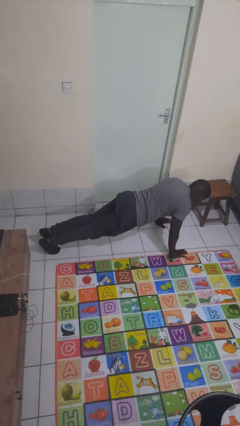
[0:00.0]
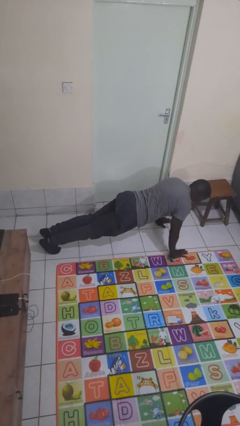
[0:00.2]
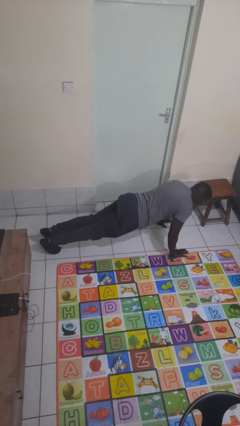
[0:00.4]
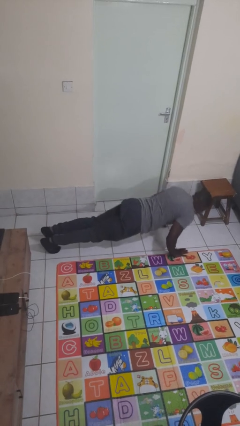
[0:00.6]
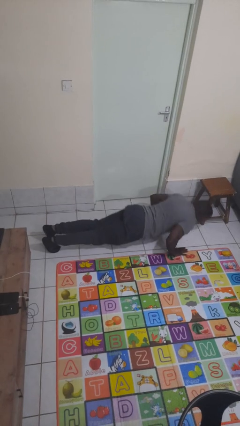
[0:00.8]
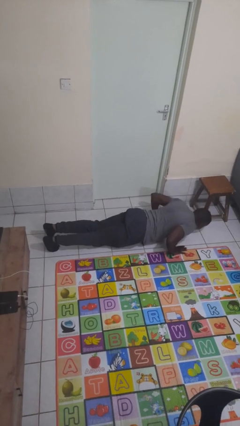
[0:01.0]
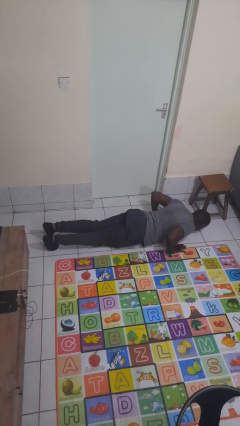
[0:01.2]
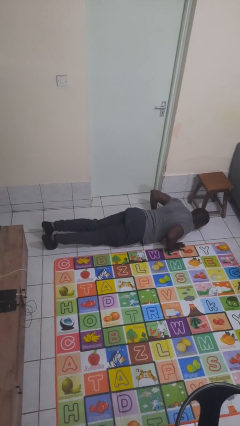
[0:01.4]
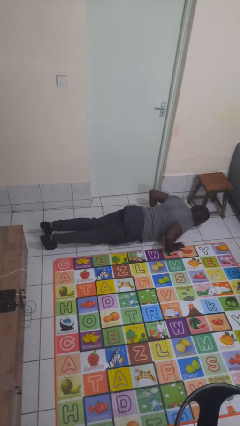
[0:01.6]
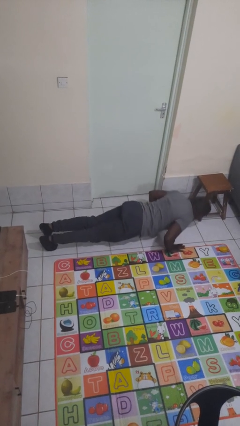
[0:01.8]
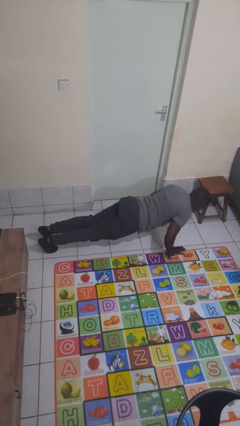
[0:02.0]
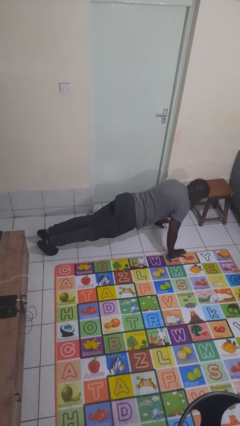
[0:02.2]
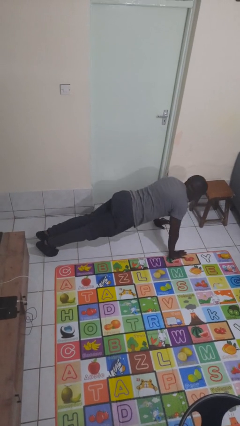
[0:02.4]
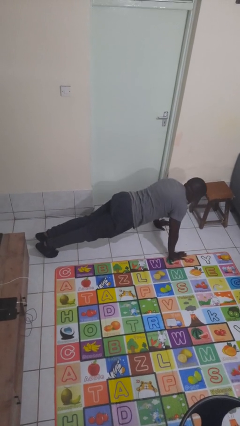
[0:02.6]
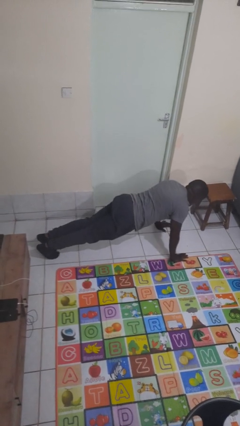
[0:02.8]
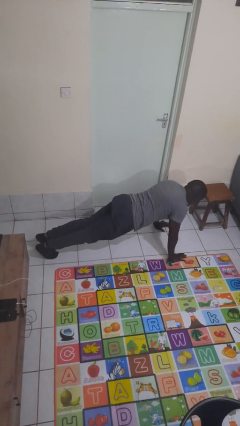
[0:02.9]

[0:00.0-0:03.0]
person exercises with pushup

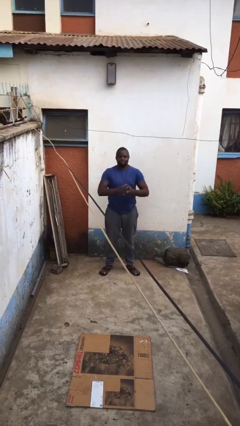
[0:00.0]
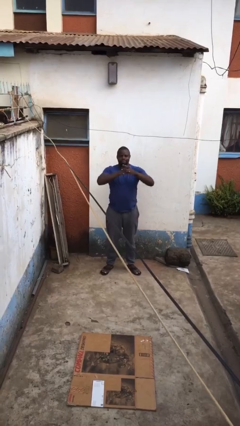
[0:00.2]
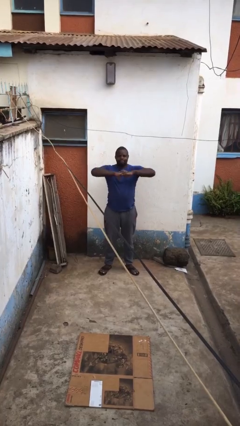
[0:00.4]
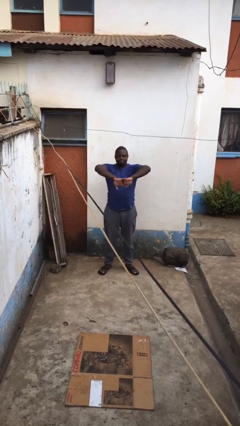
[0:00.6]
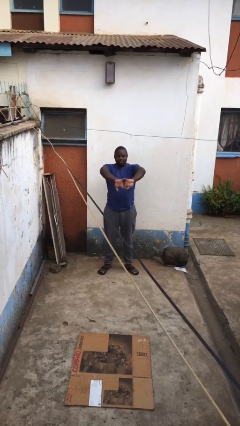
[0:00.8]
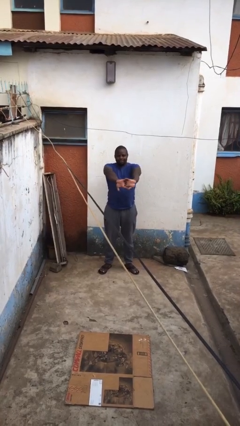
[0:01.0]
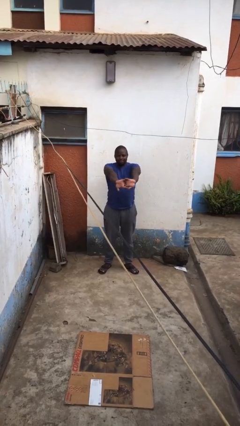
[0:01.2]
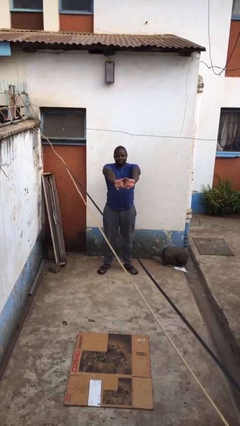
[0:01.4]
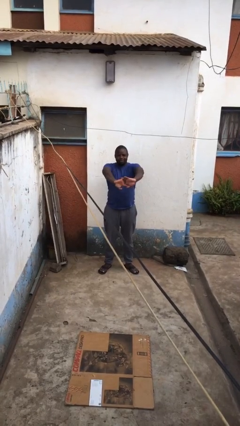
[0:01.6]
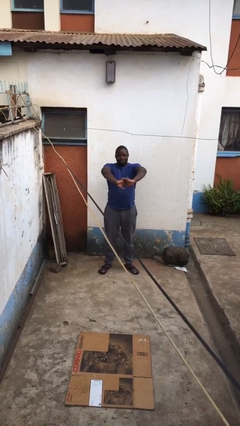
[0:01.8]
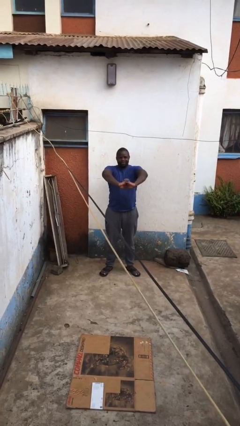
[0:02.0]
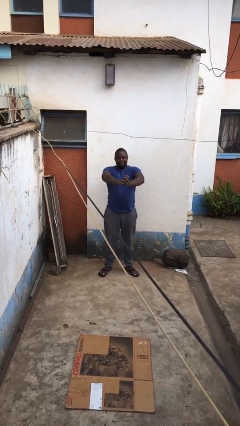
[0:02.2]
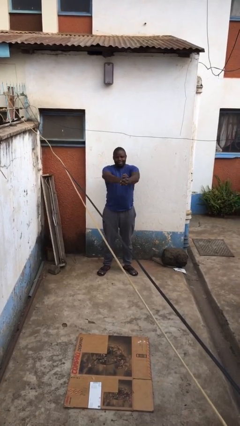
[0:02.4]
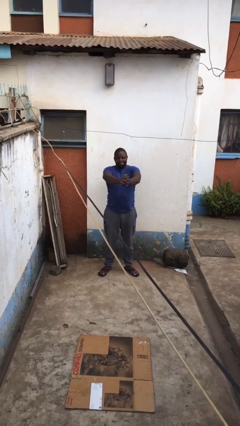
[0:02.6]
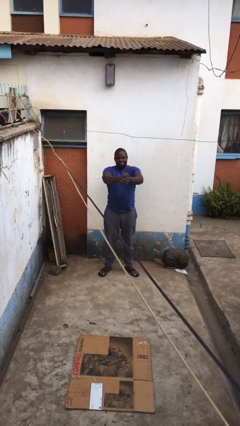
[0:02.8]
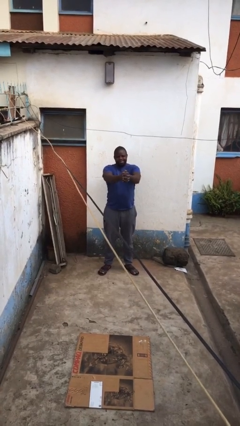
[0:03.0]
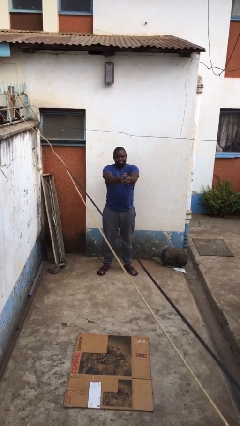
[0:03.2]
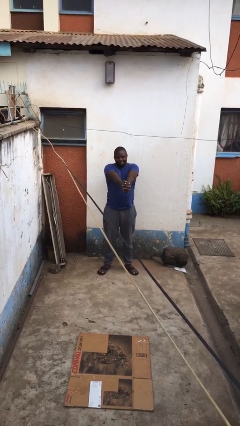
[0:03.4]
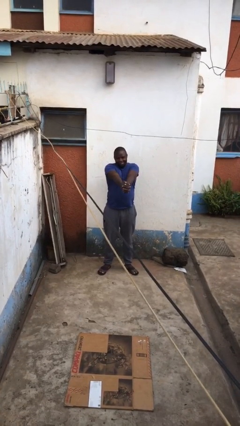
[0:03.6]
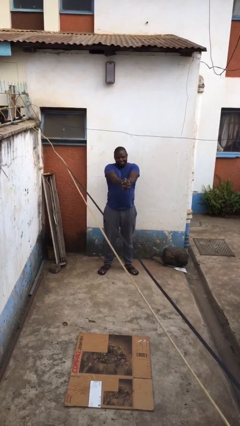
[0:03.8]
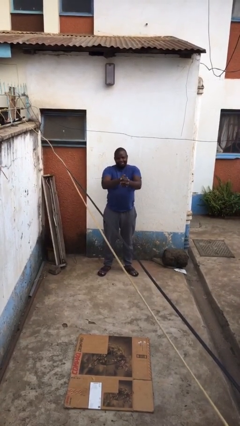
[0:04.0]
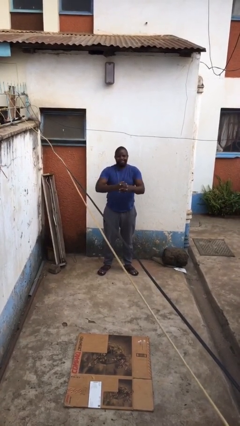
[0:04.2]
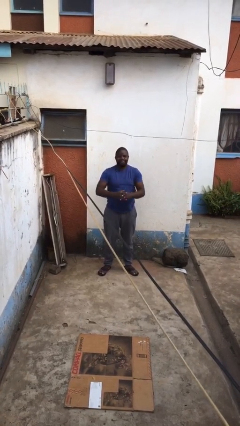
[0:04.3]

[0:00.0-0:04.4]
person cracks knuckles

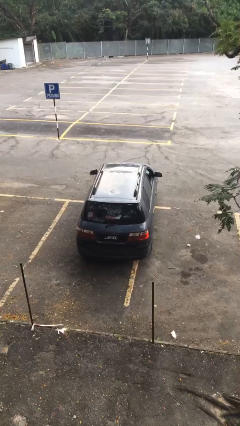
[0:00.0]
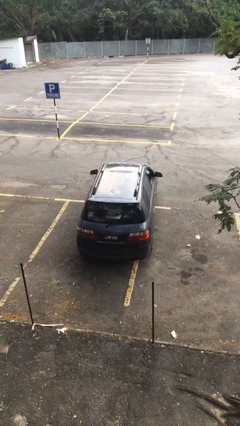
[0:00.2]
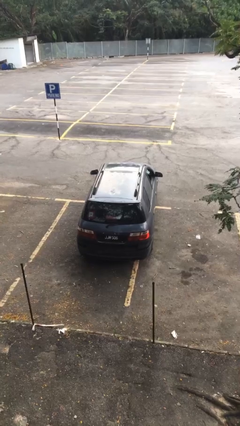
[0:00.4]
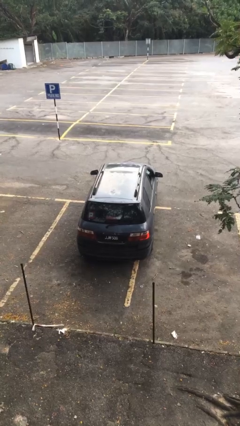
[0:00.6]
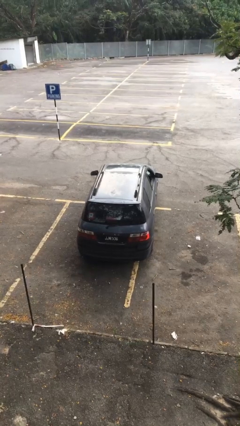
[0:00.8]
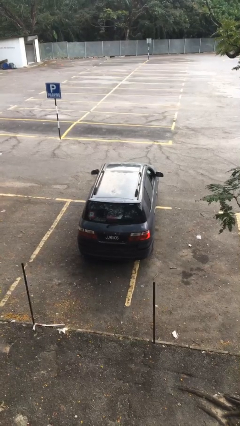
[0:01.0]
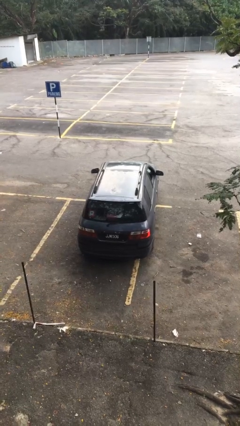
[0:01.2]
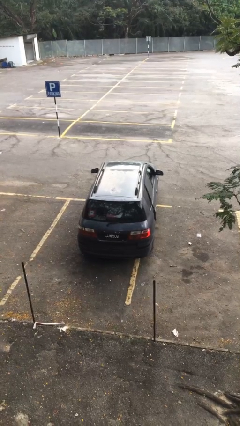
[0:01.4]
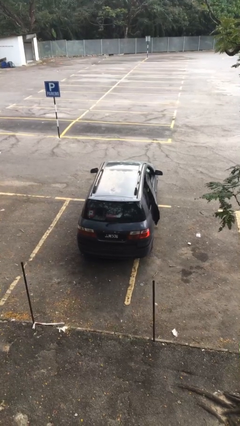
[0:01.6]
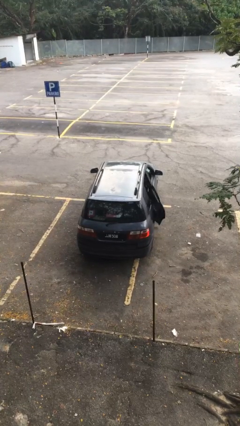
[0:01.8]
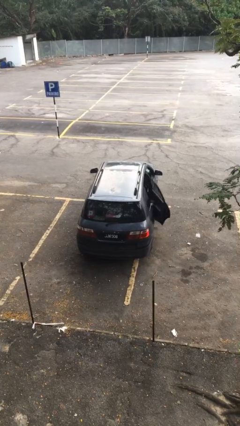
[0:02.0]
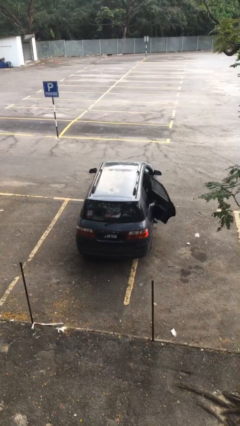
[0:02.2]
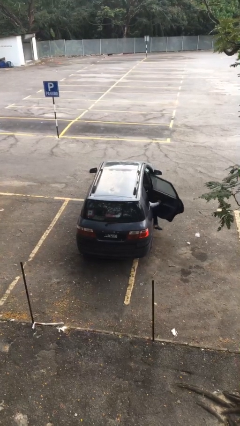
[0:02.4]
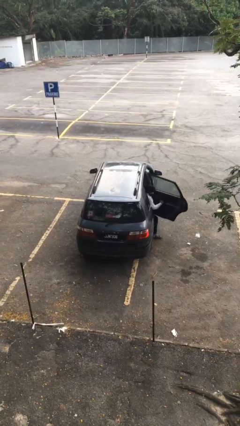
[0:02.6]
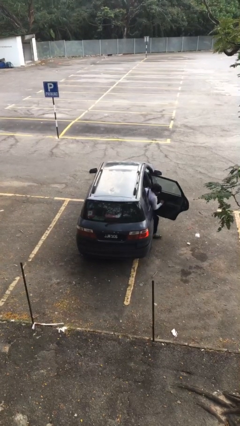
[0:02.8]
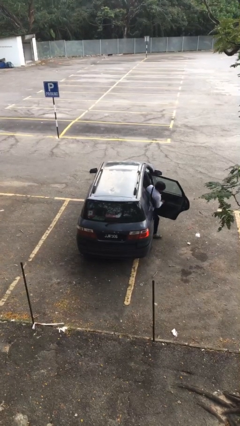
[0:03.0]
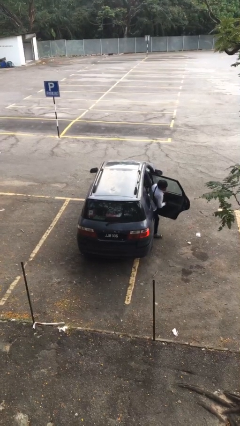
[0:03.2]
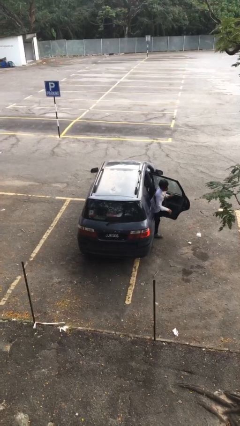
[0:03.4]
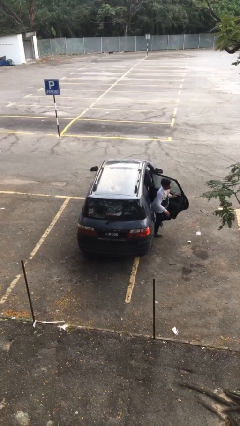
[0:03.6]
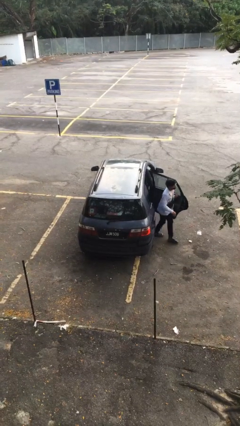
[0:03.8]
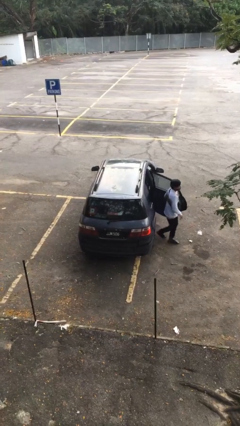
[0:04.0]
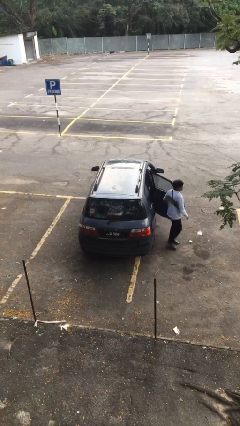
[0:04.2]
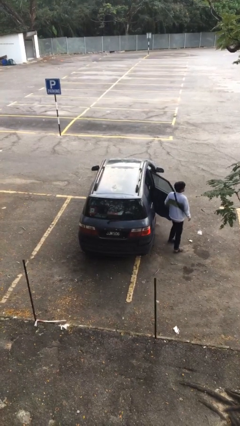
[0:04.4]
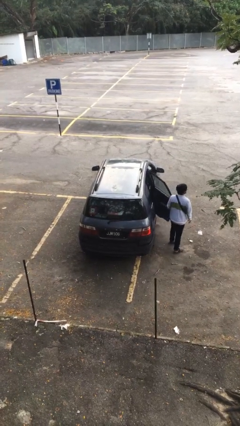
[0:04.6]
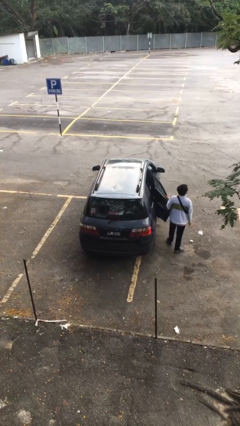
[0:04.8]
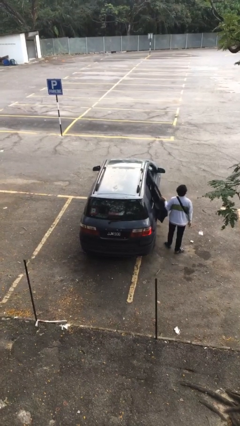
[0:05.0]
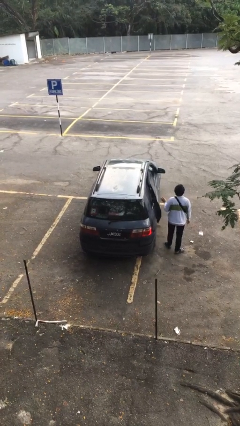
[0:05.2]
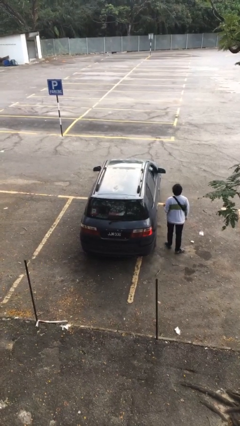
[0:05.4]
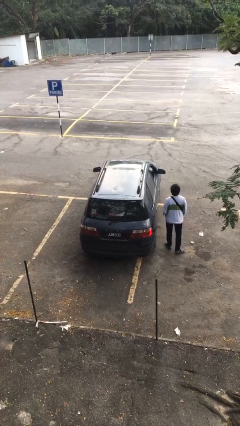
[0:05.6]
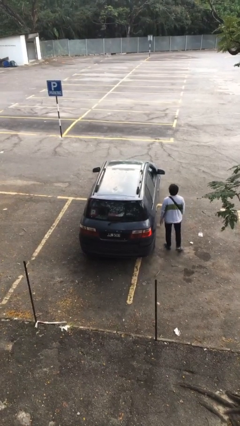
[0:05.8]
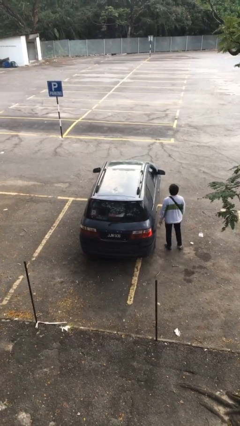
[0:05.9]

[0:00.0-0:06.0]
car drops off person

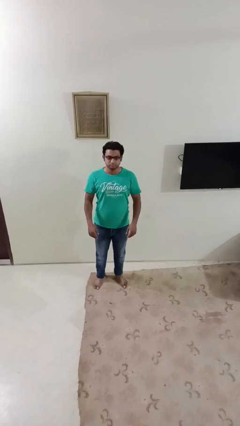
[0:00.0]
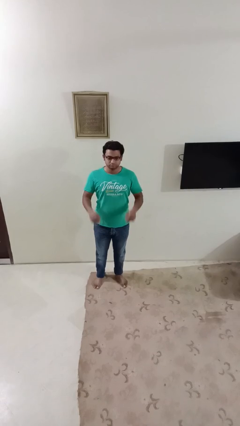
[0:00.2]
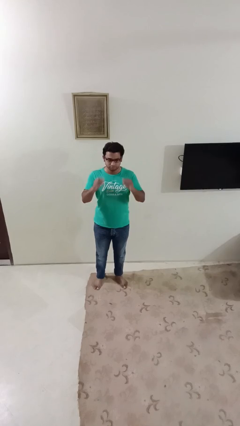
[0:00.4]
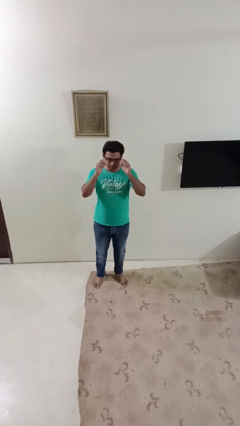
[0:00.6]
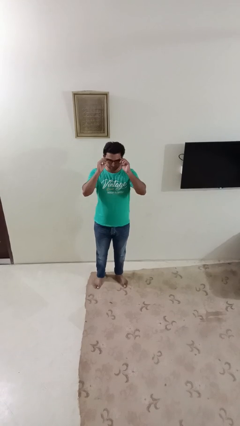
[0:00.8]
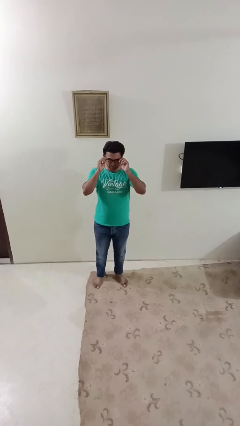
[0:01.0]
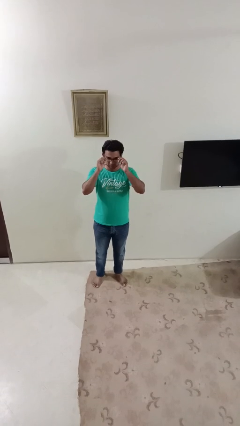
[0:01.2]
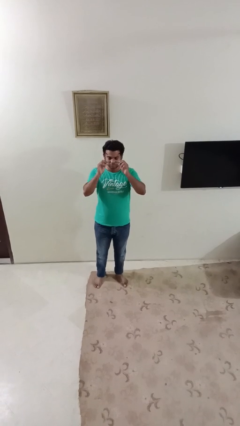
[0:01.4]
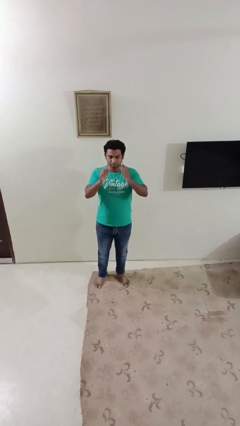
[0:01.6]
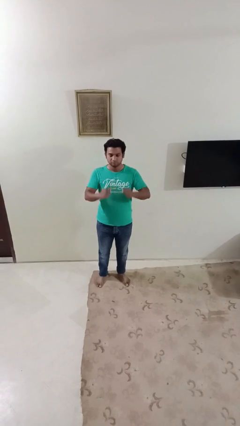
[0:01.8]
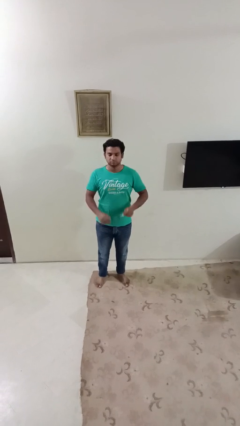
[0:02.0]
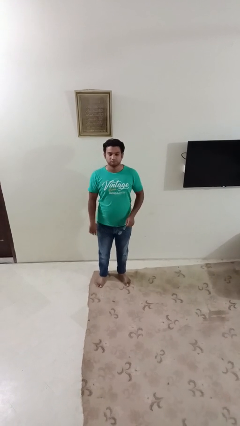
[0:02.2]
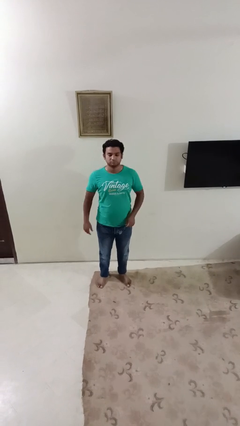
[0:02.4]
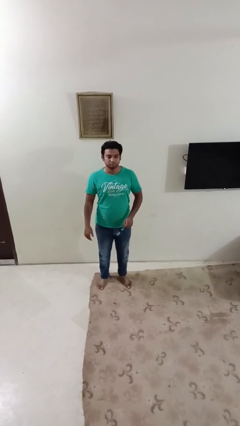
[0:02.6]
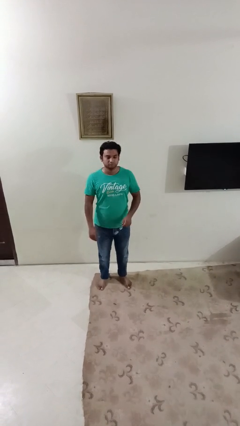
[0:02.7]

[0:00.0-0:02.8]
person takes off glasses

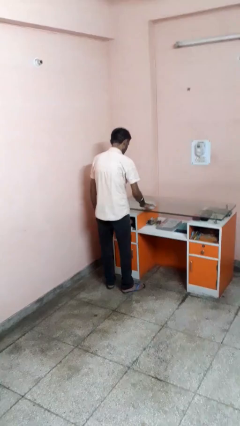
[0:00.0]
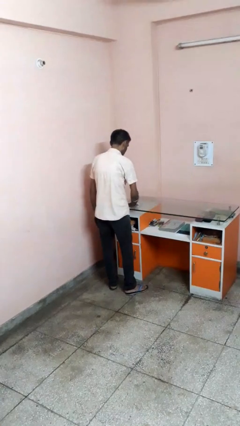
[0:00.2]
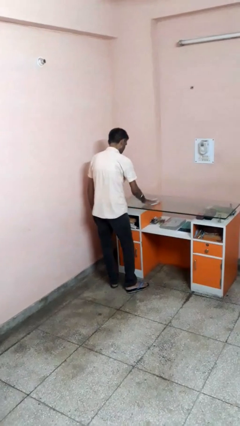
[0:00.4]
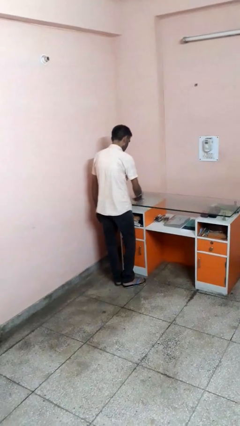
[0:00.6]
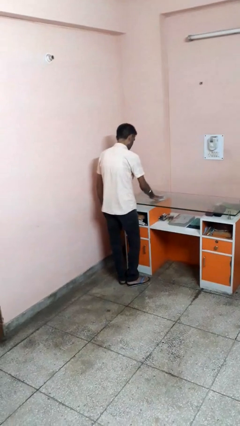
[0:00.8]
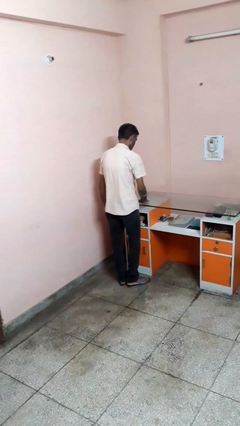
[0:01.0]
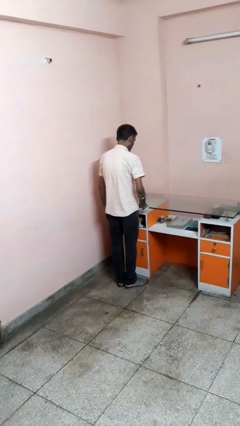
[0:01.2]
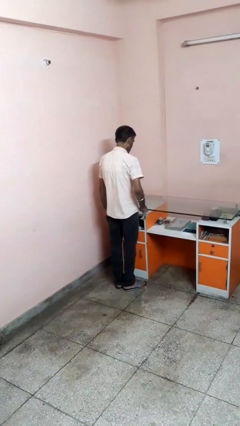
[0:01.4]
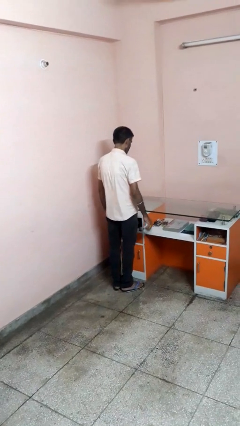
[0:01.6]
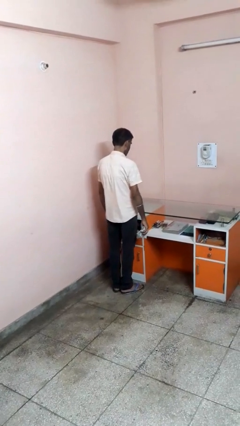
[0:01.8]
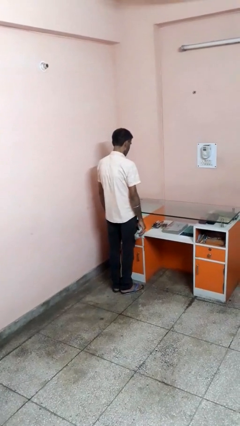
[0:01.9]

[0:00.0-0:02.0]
person cleans table with rag
